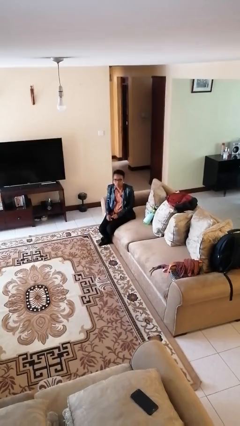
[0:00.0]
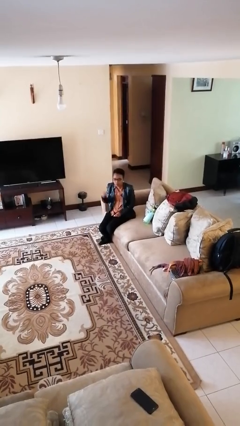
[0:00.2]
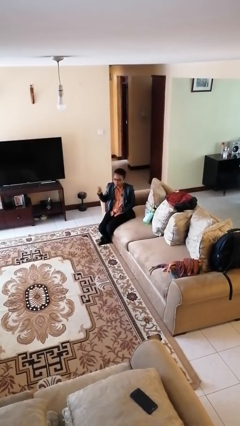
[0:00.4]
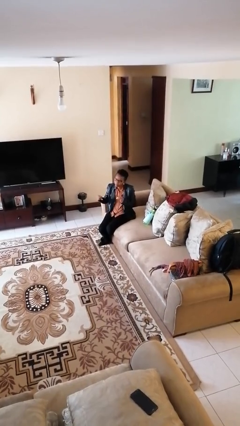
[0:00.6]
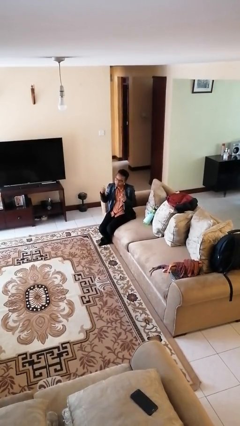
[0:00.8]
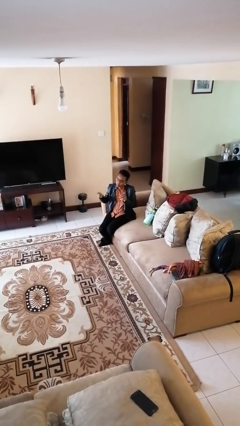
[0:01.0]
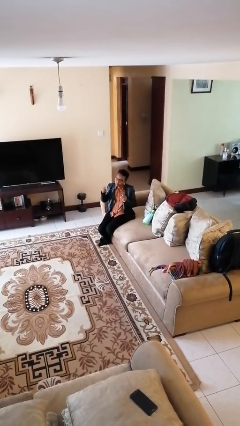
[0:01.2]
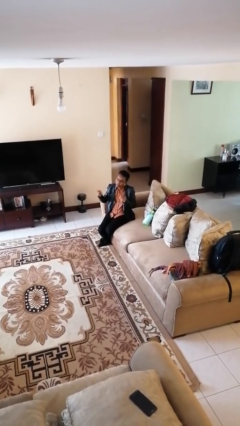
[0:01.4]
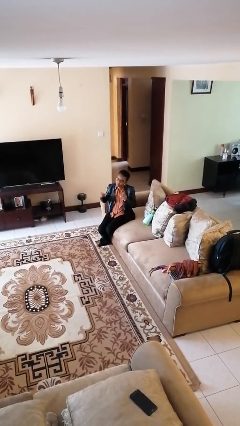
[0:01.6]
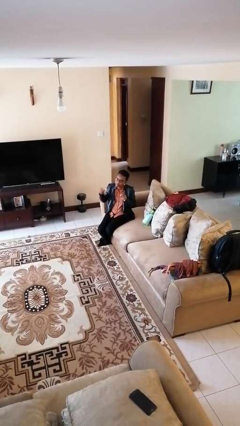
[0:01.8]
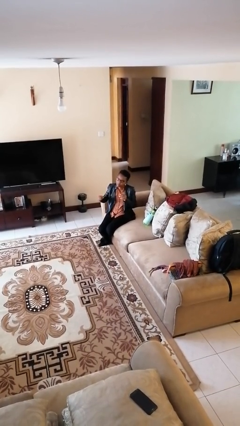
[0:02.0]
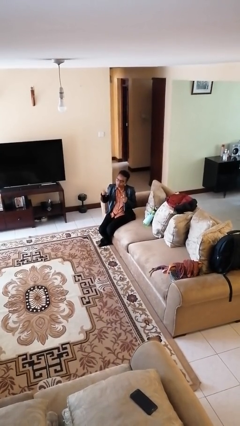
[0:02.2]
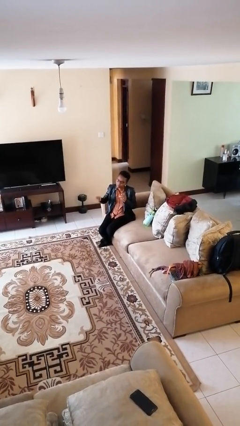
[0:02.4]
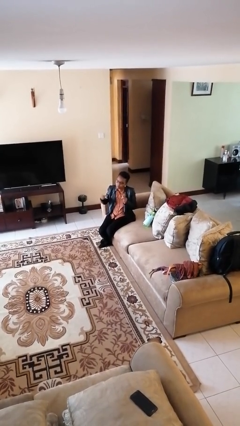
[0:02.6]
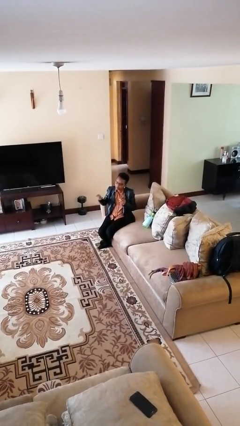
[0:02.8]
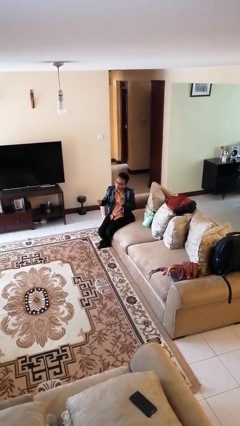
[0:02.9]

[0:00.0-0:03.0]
person snaps fingers

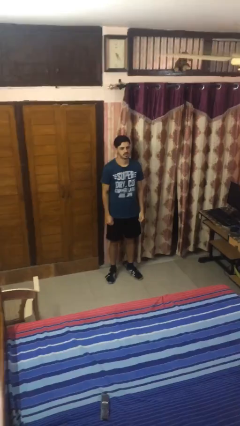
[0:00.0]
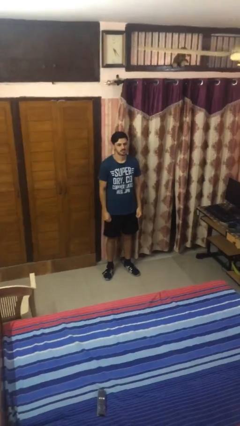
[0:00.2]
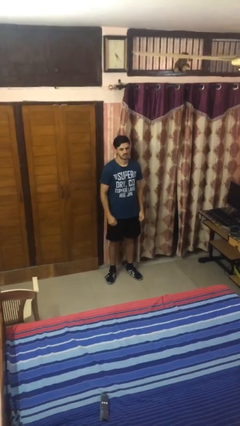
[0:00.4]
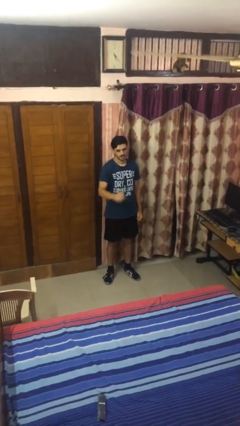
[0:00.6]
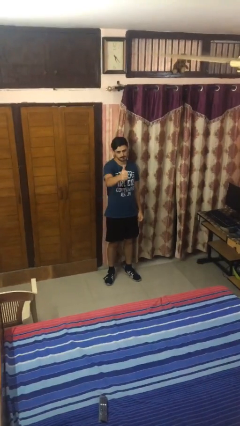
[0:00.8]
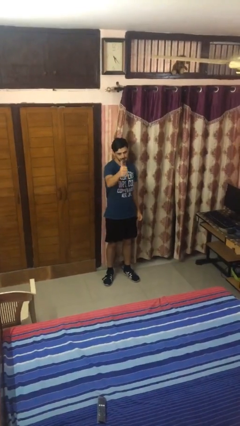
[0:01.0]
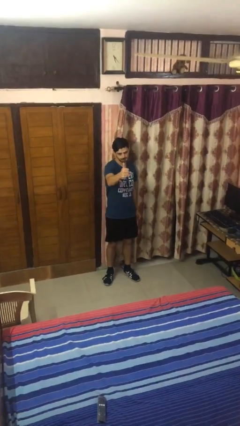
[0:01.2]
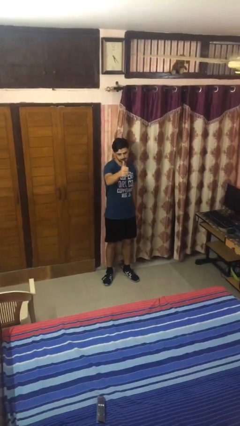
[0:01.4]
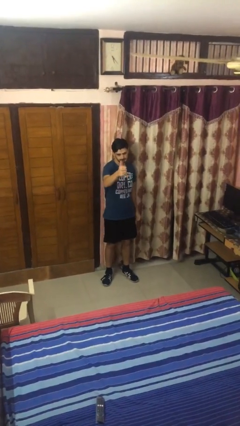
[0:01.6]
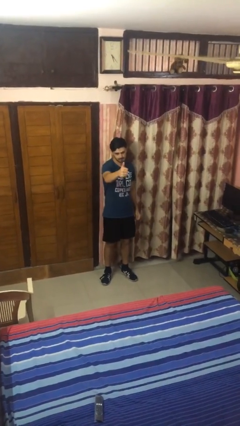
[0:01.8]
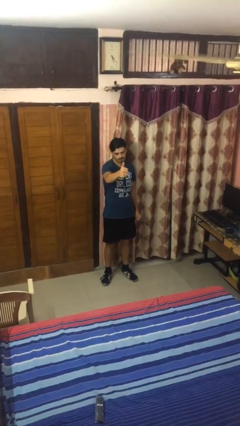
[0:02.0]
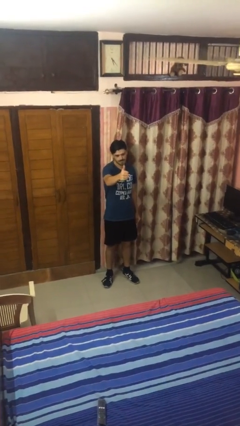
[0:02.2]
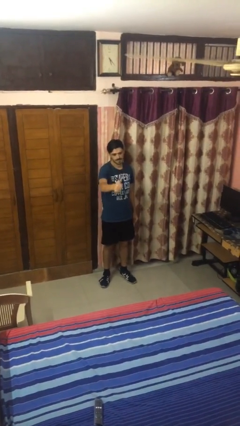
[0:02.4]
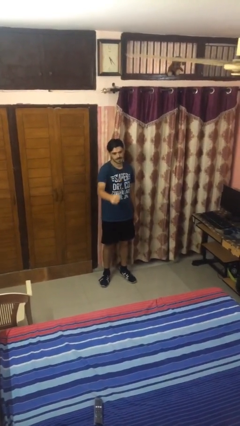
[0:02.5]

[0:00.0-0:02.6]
person gestures thumbs up

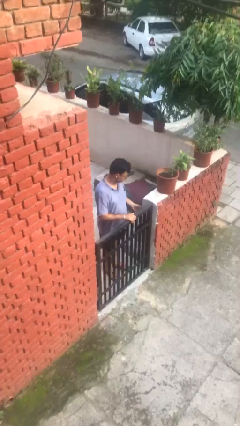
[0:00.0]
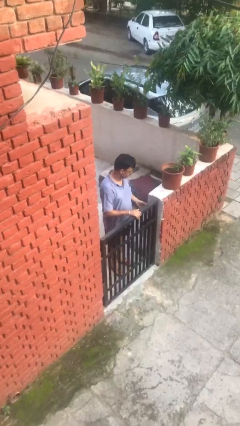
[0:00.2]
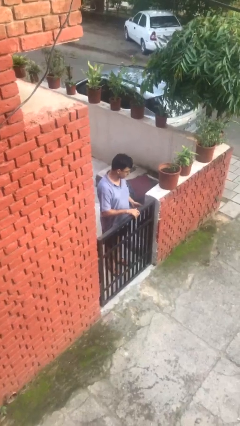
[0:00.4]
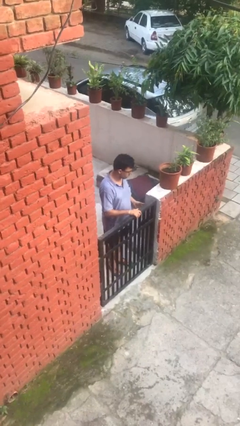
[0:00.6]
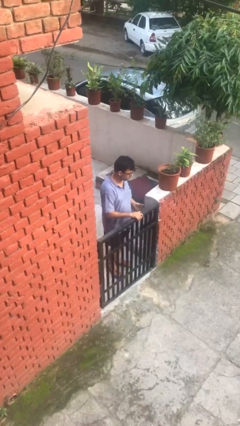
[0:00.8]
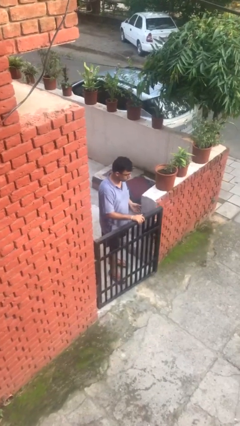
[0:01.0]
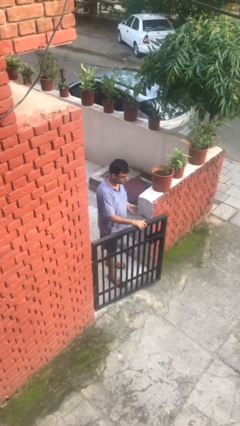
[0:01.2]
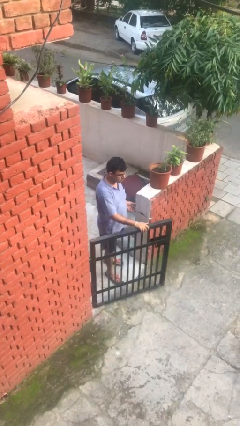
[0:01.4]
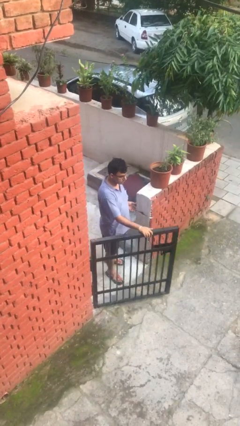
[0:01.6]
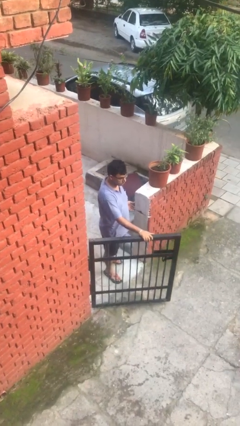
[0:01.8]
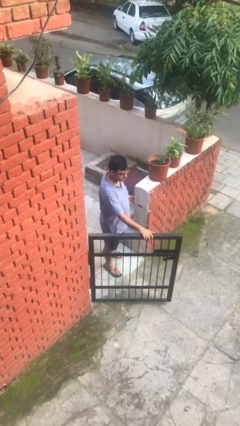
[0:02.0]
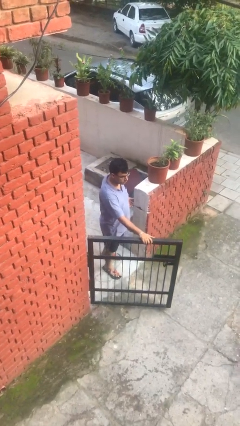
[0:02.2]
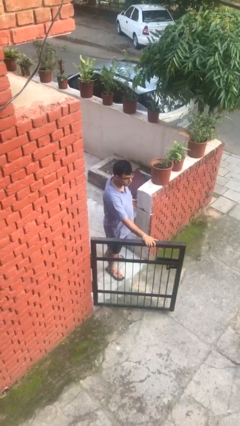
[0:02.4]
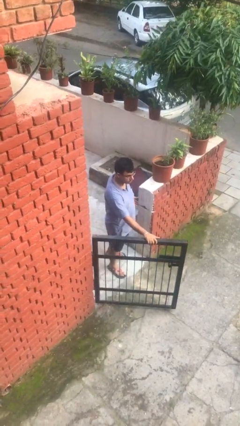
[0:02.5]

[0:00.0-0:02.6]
person opens gate

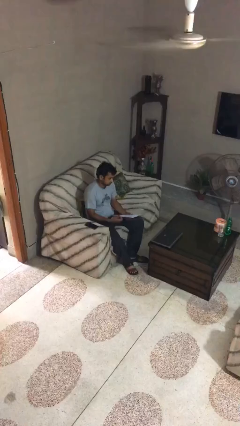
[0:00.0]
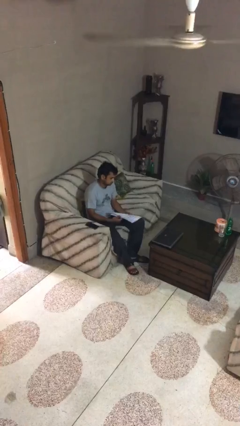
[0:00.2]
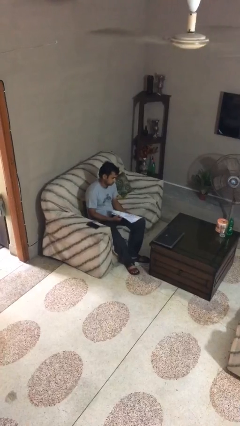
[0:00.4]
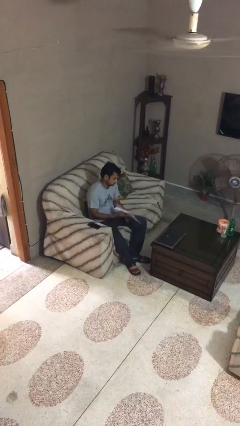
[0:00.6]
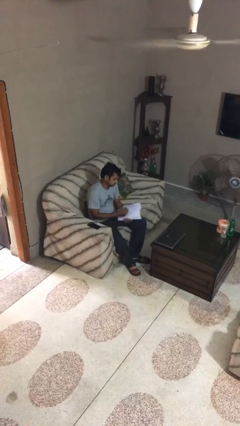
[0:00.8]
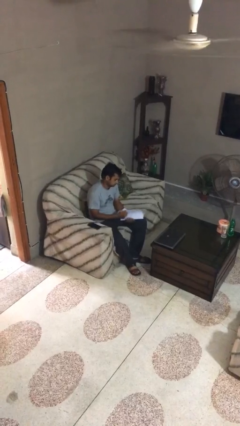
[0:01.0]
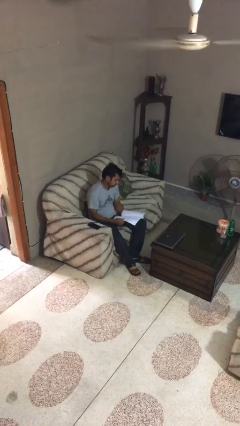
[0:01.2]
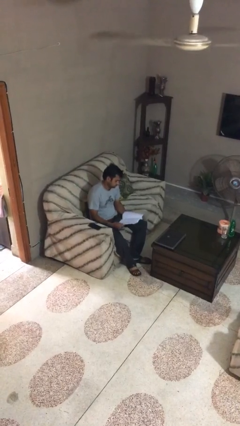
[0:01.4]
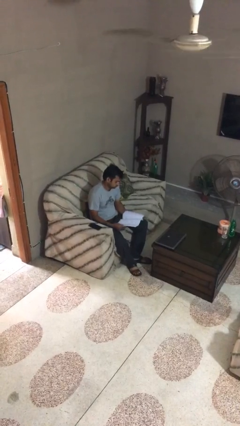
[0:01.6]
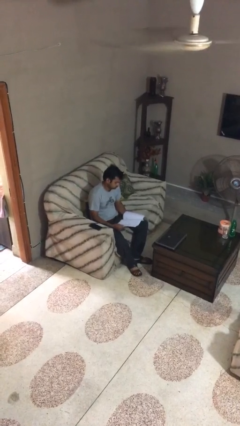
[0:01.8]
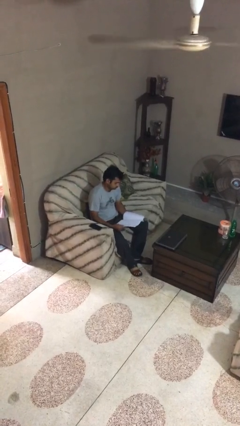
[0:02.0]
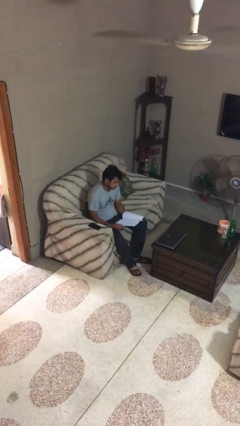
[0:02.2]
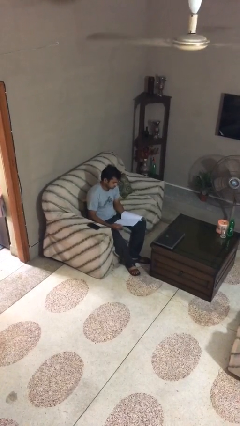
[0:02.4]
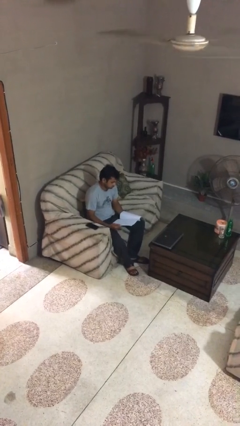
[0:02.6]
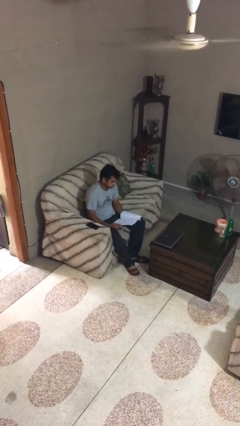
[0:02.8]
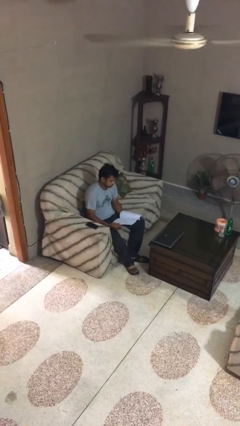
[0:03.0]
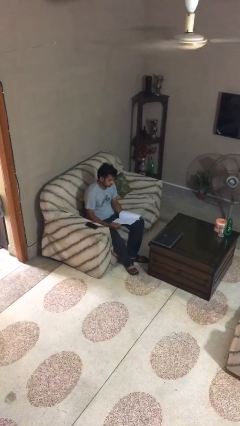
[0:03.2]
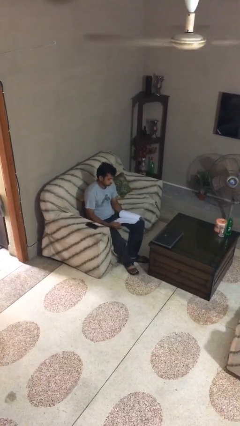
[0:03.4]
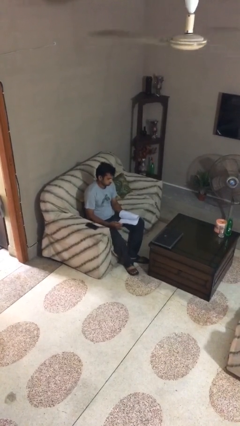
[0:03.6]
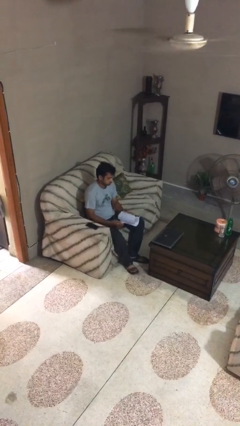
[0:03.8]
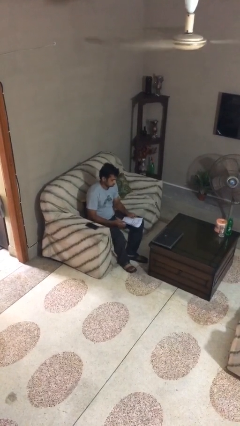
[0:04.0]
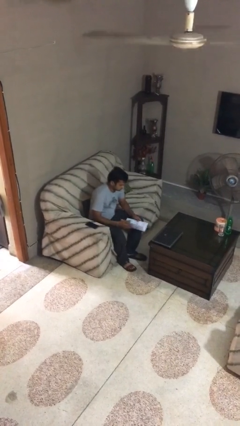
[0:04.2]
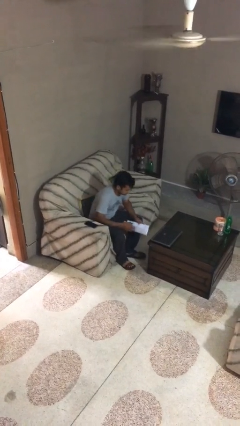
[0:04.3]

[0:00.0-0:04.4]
person reads document

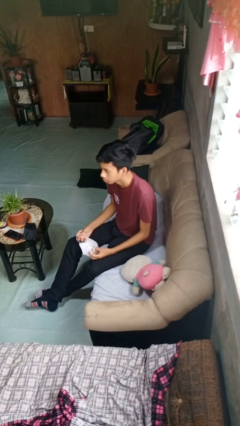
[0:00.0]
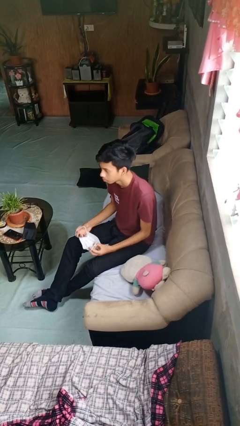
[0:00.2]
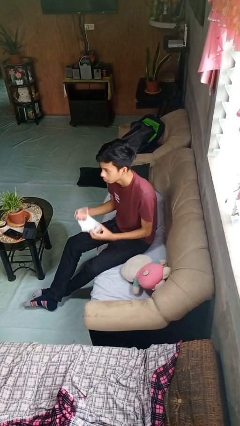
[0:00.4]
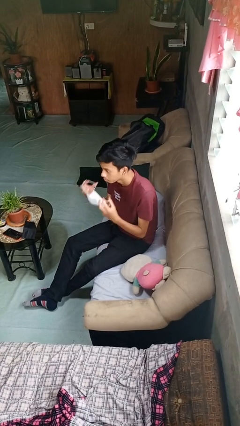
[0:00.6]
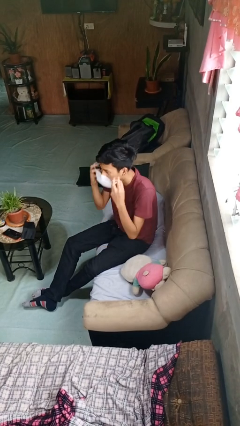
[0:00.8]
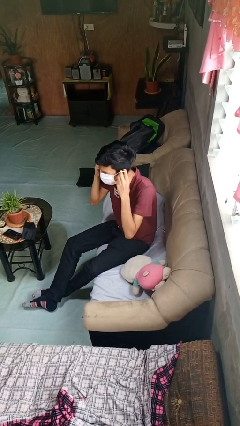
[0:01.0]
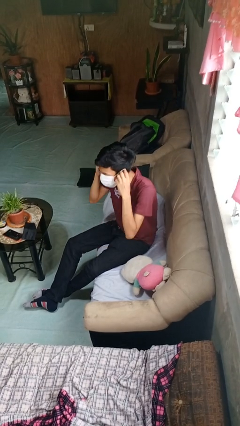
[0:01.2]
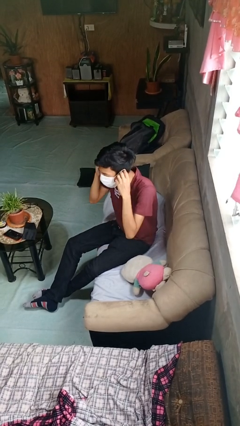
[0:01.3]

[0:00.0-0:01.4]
person puts on facemask

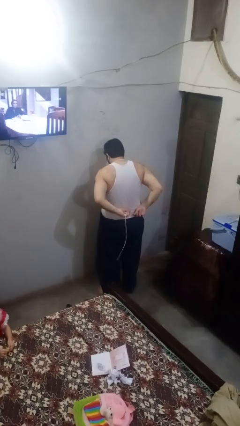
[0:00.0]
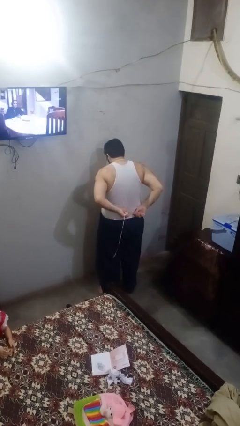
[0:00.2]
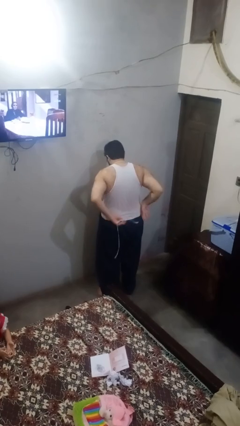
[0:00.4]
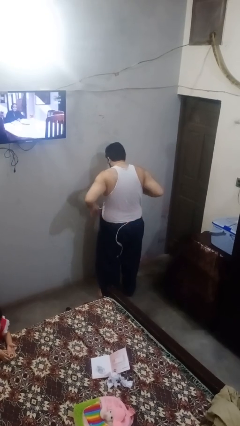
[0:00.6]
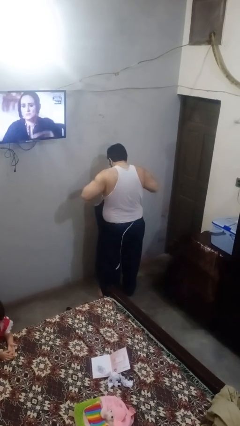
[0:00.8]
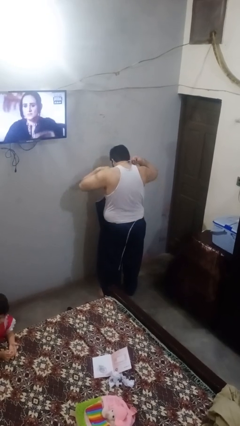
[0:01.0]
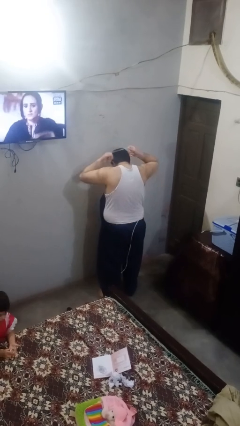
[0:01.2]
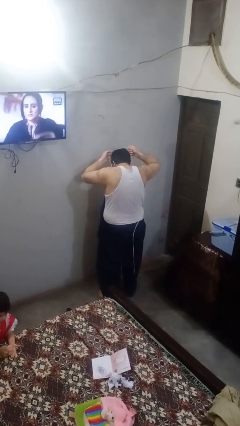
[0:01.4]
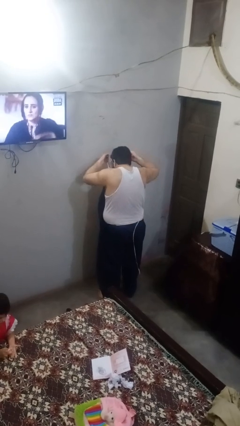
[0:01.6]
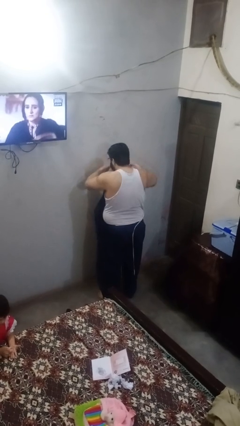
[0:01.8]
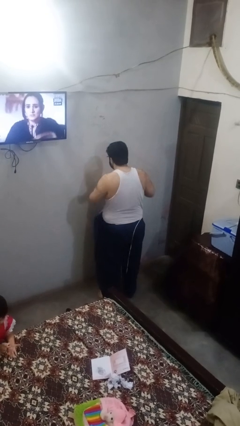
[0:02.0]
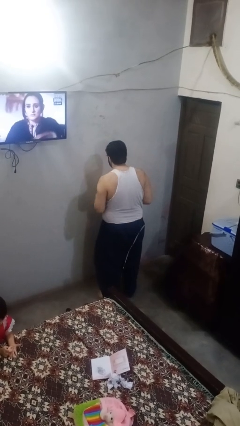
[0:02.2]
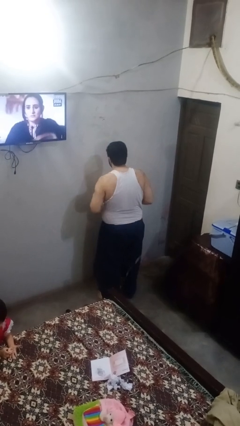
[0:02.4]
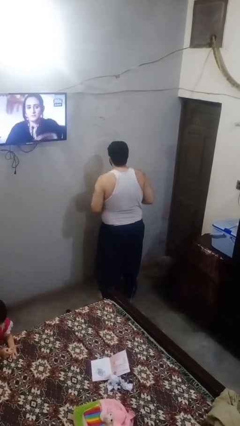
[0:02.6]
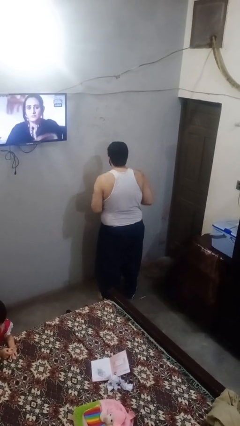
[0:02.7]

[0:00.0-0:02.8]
person takes off apron

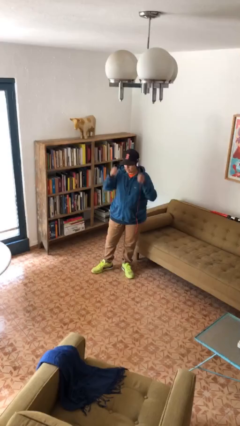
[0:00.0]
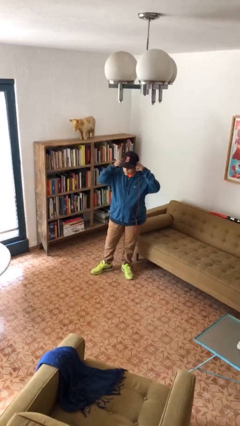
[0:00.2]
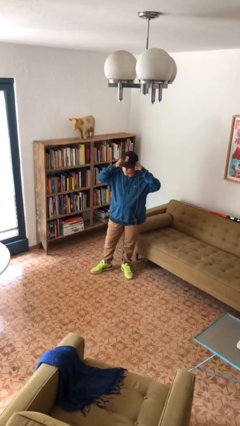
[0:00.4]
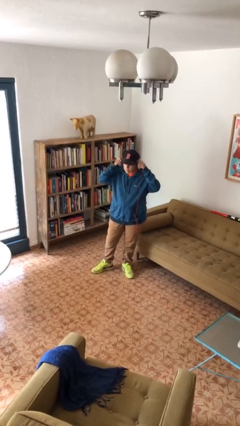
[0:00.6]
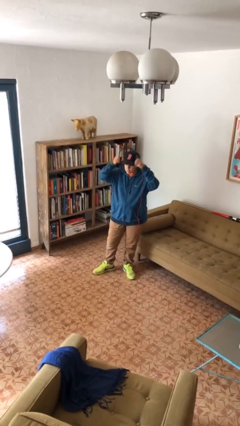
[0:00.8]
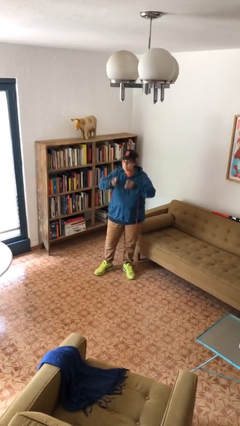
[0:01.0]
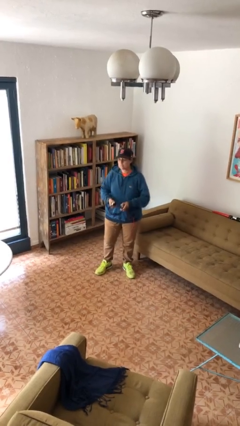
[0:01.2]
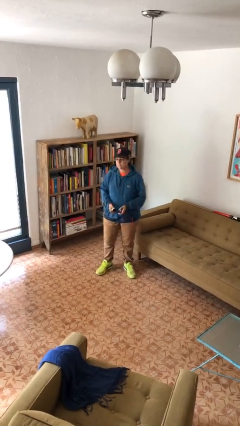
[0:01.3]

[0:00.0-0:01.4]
person takes off headphones
